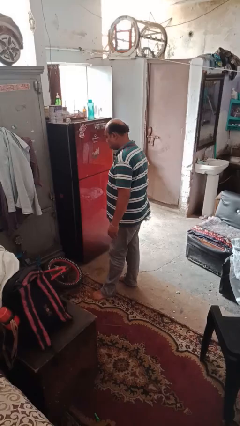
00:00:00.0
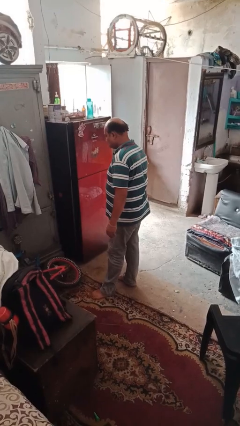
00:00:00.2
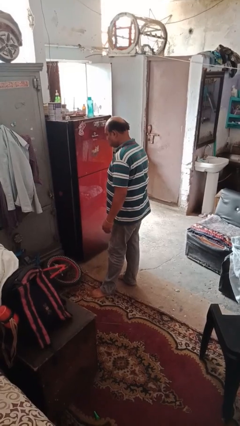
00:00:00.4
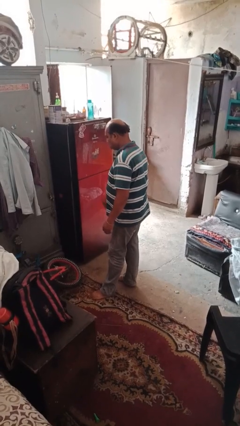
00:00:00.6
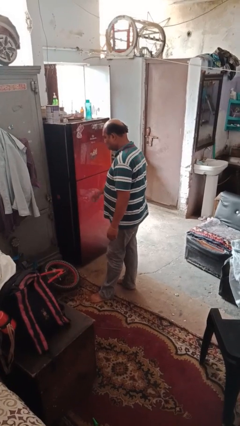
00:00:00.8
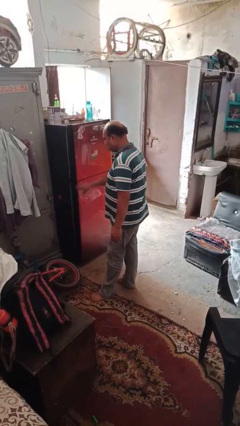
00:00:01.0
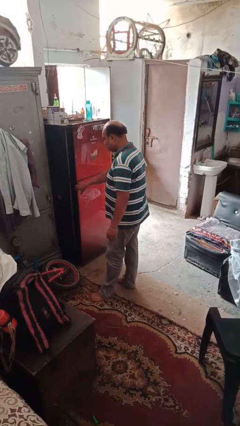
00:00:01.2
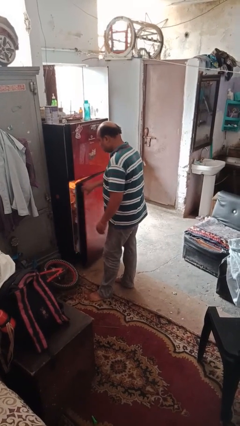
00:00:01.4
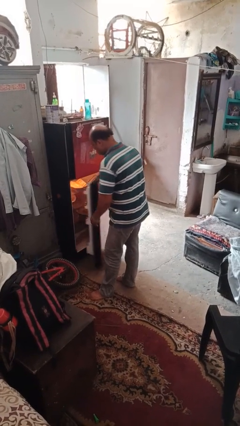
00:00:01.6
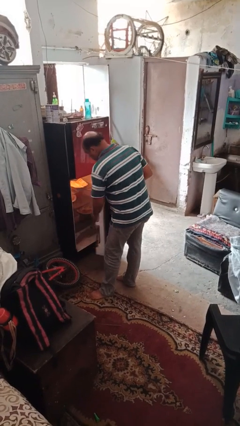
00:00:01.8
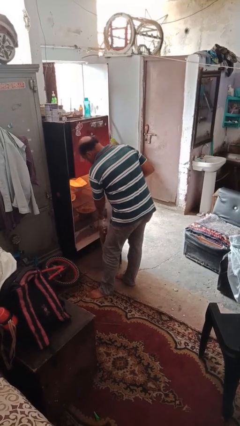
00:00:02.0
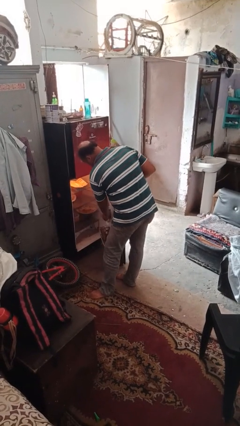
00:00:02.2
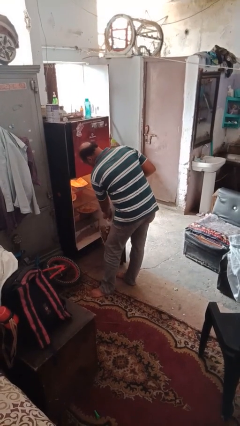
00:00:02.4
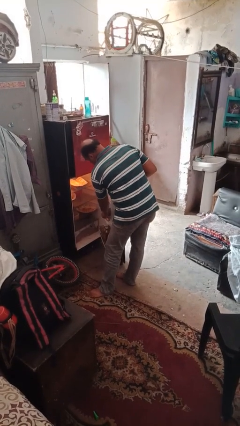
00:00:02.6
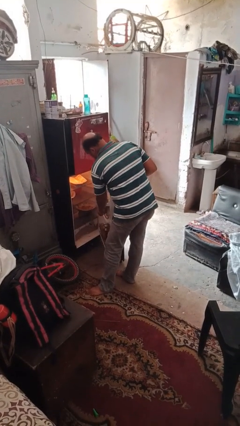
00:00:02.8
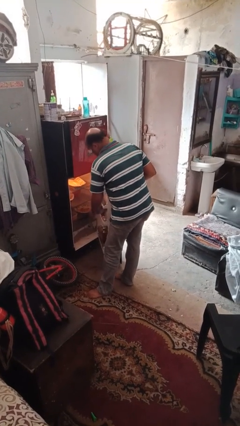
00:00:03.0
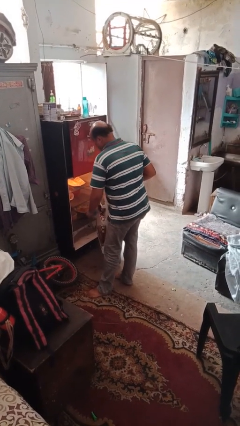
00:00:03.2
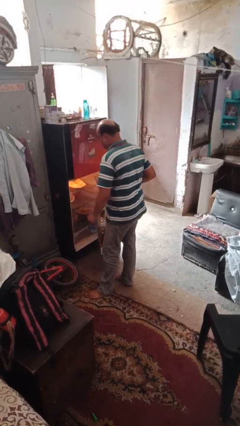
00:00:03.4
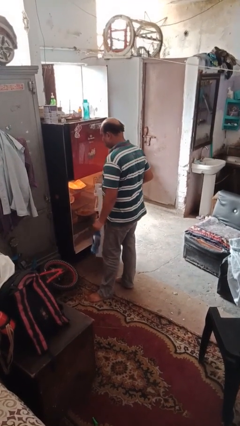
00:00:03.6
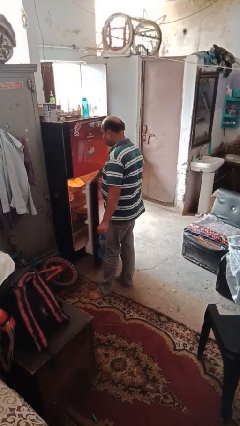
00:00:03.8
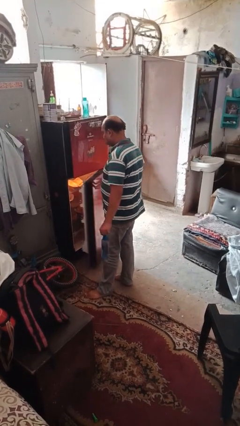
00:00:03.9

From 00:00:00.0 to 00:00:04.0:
person takes object from refrigerator

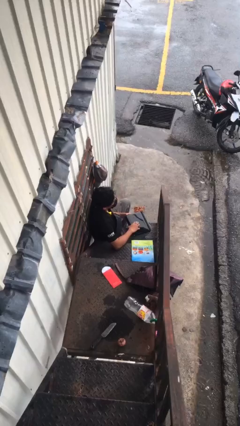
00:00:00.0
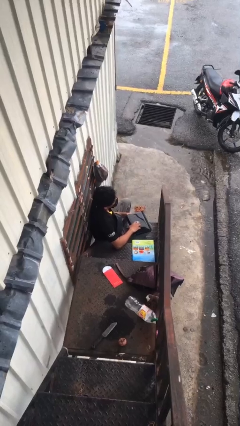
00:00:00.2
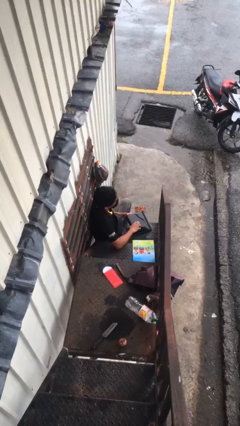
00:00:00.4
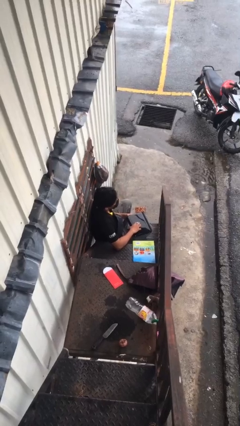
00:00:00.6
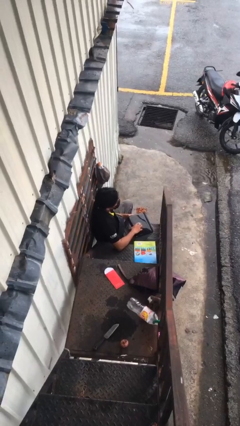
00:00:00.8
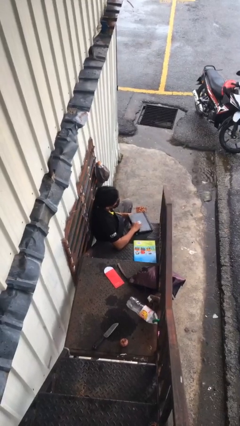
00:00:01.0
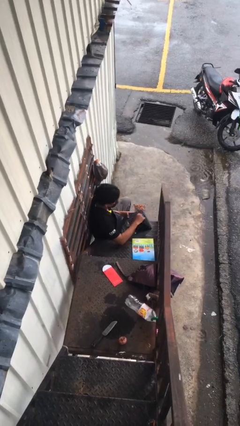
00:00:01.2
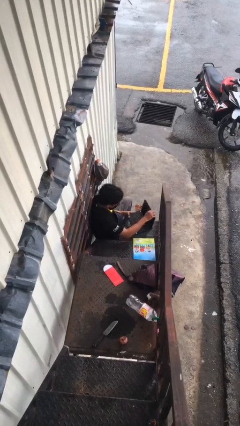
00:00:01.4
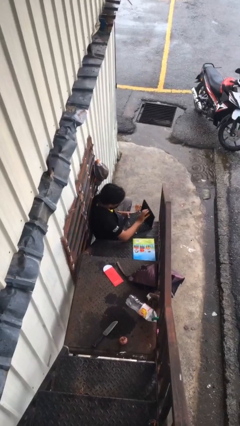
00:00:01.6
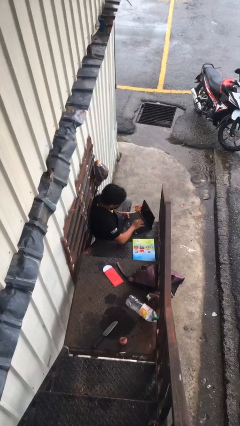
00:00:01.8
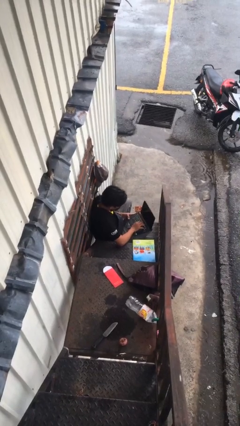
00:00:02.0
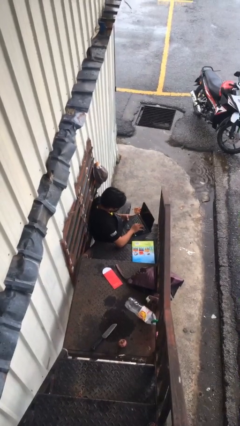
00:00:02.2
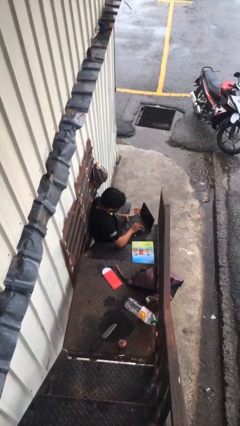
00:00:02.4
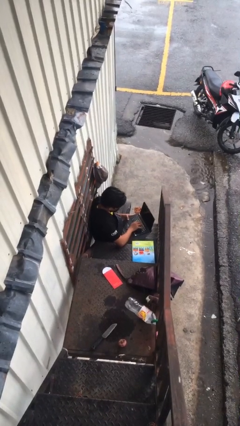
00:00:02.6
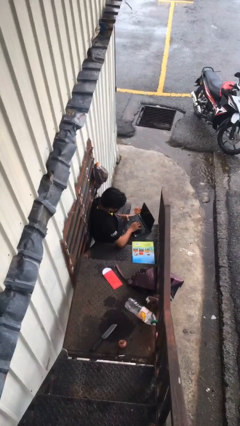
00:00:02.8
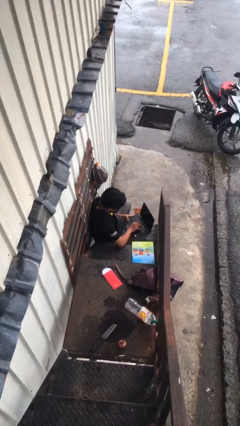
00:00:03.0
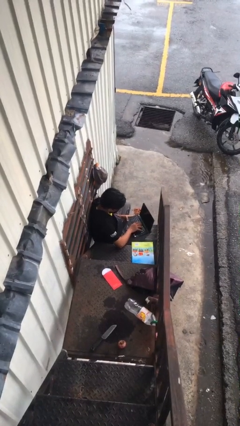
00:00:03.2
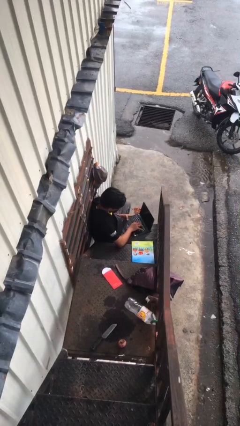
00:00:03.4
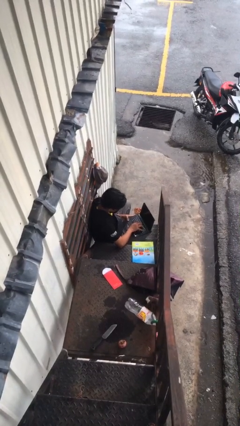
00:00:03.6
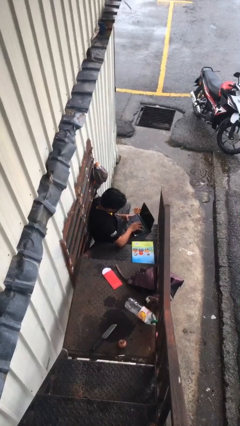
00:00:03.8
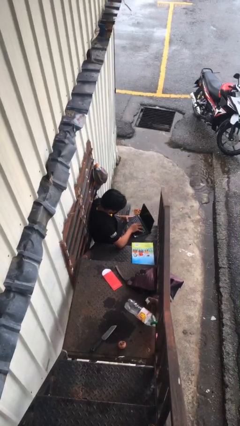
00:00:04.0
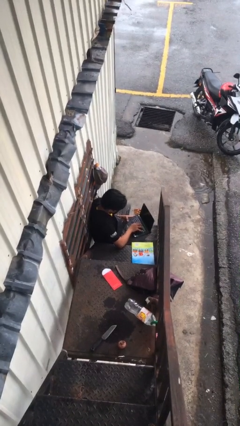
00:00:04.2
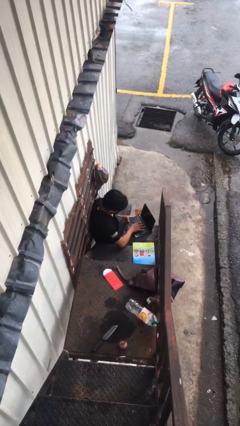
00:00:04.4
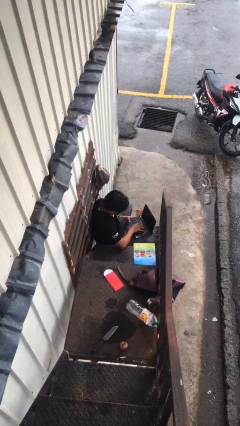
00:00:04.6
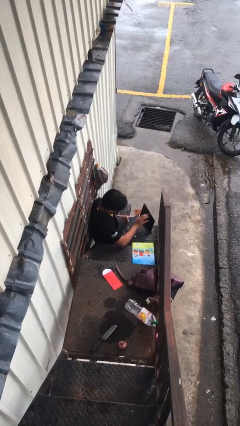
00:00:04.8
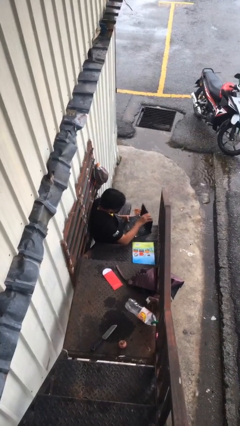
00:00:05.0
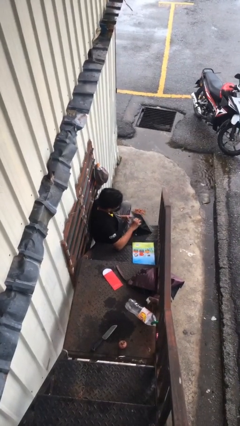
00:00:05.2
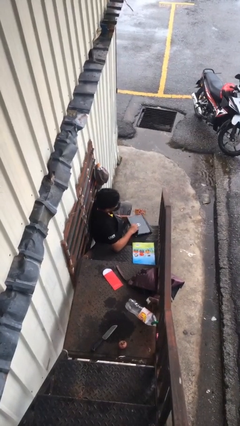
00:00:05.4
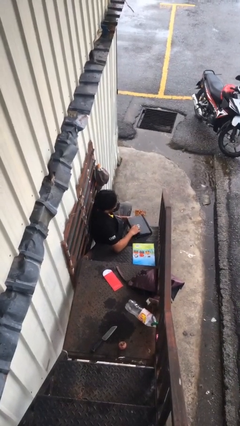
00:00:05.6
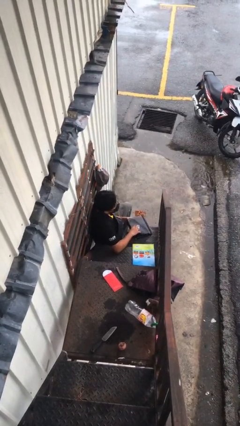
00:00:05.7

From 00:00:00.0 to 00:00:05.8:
person interacts with laptop

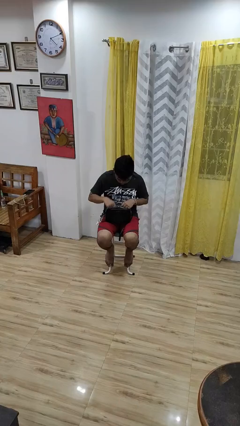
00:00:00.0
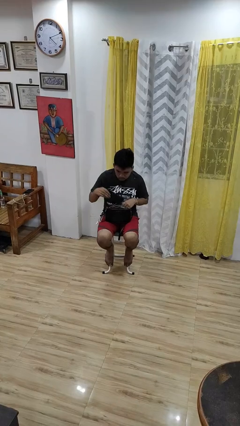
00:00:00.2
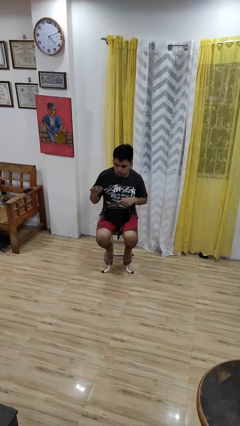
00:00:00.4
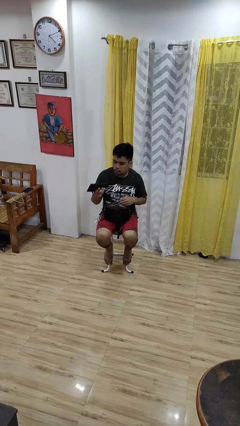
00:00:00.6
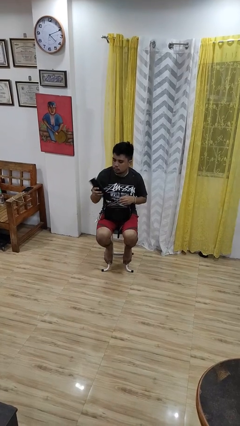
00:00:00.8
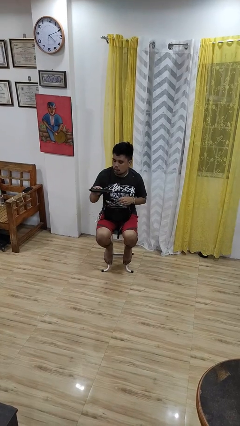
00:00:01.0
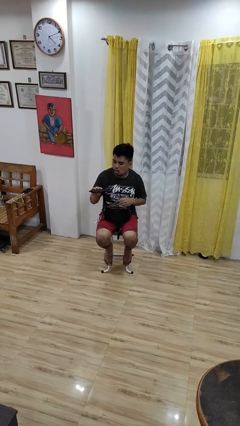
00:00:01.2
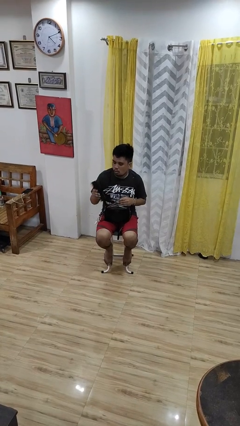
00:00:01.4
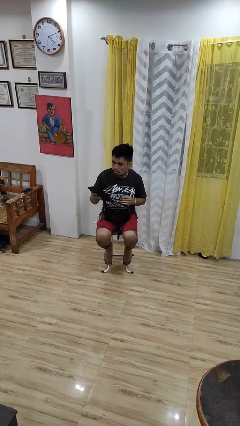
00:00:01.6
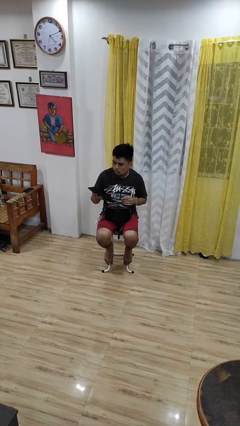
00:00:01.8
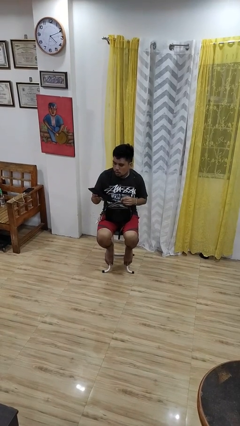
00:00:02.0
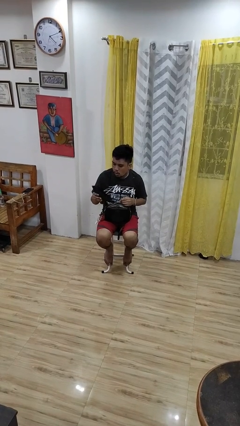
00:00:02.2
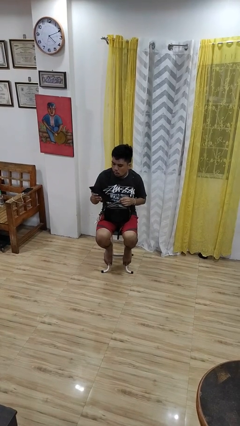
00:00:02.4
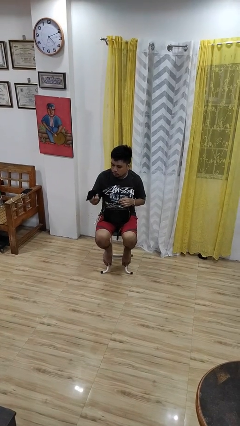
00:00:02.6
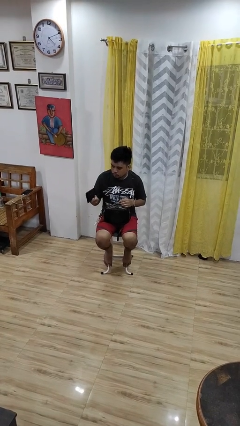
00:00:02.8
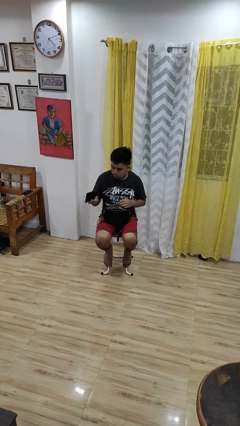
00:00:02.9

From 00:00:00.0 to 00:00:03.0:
person takes object from purse

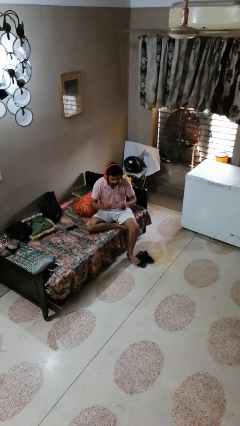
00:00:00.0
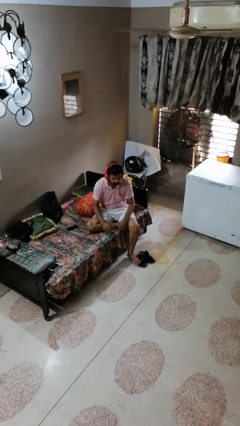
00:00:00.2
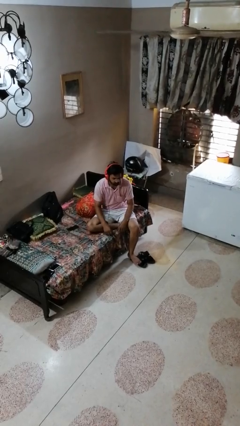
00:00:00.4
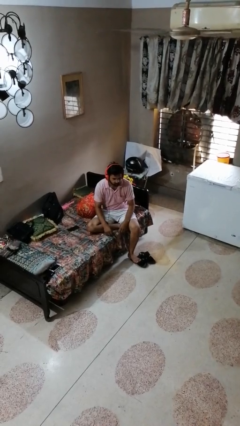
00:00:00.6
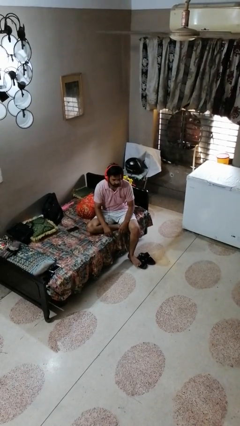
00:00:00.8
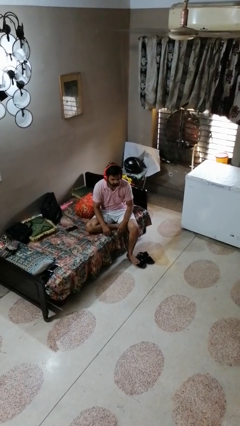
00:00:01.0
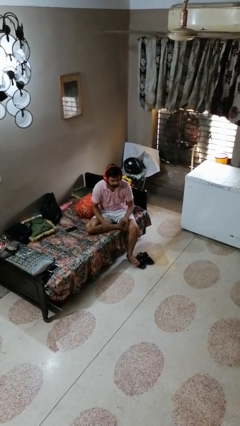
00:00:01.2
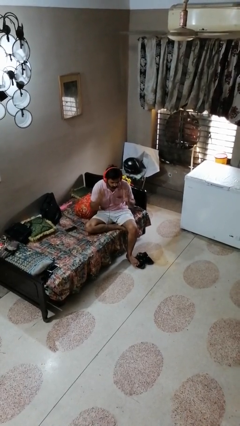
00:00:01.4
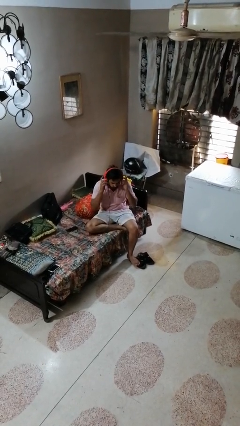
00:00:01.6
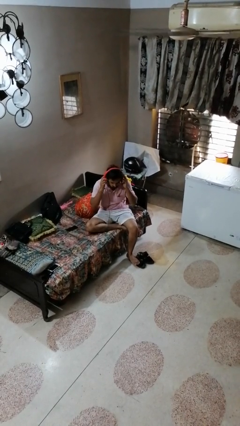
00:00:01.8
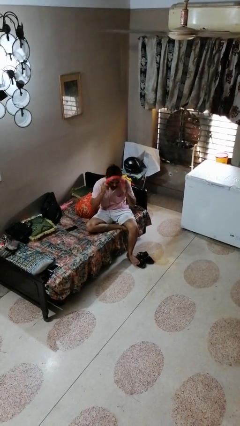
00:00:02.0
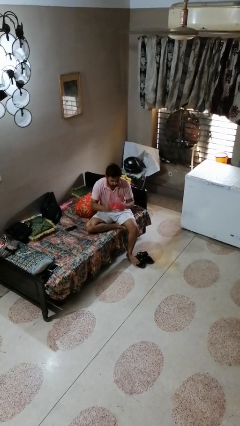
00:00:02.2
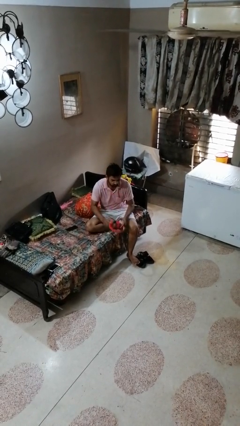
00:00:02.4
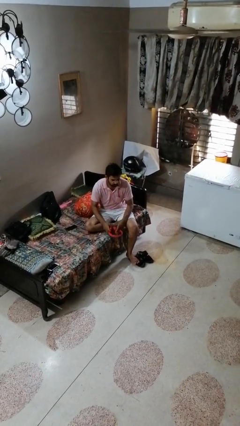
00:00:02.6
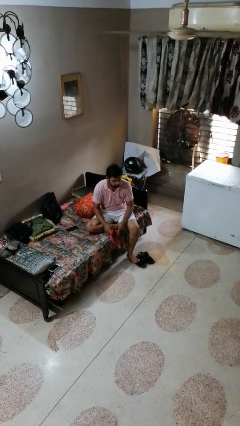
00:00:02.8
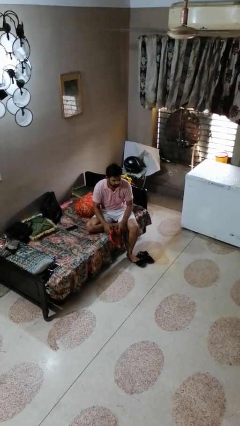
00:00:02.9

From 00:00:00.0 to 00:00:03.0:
person takes off headphones

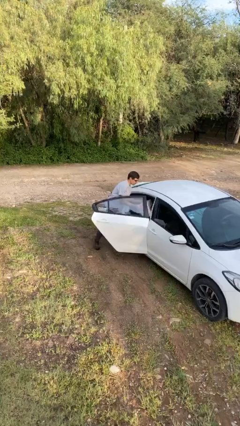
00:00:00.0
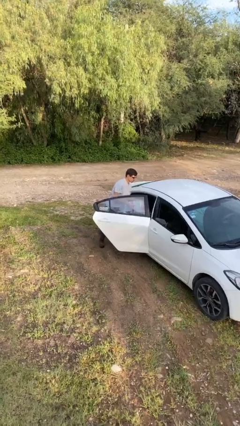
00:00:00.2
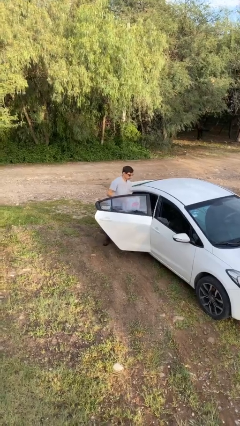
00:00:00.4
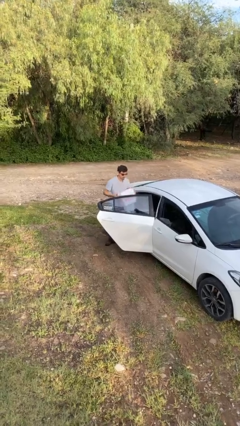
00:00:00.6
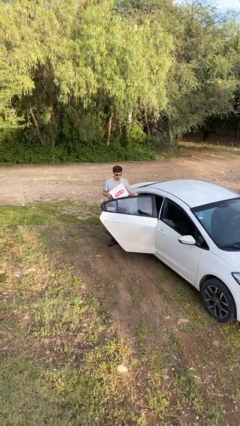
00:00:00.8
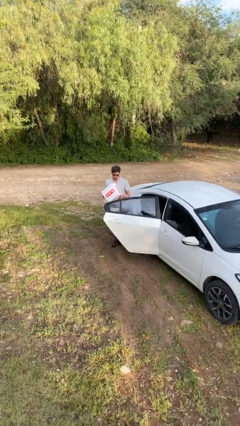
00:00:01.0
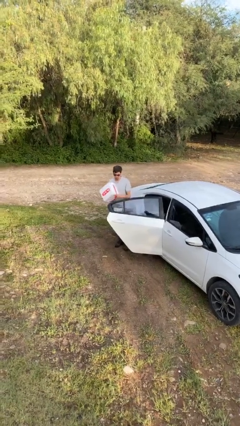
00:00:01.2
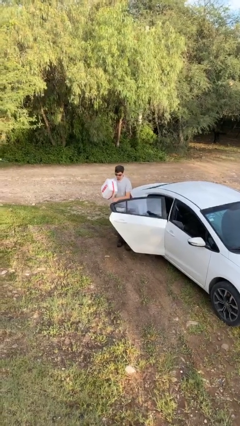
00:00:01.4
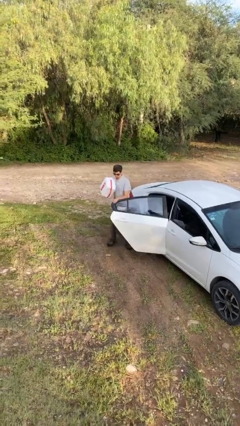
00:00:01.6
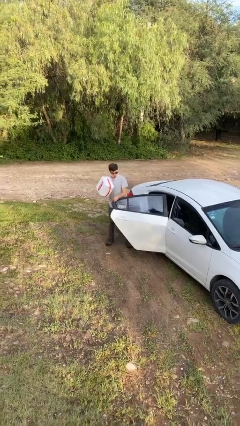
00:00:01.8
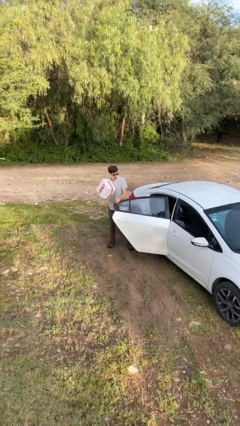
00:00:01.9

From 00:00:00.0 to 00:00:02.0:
person unloads car
